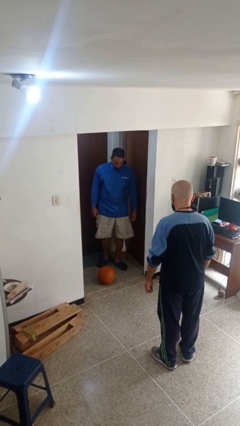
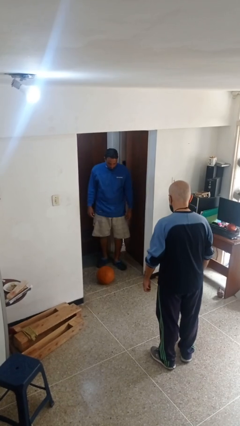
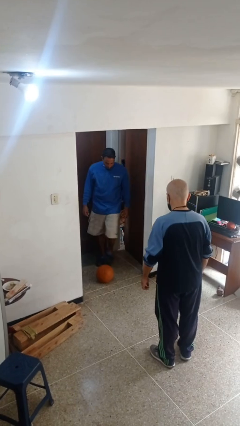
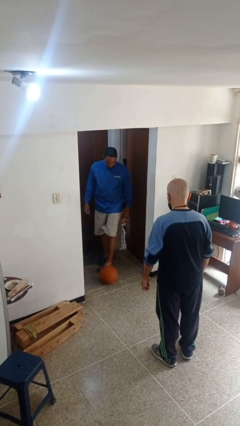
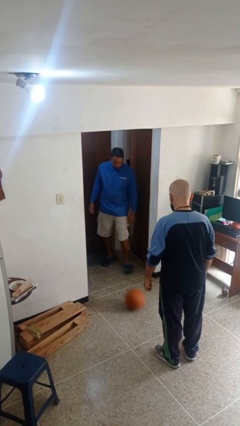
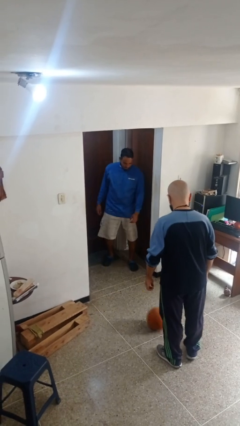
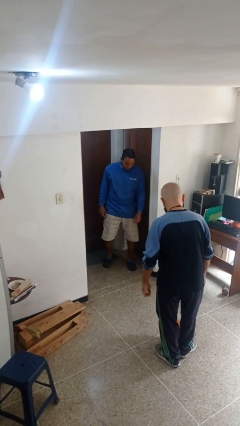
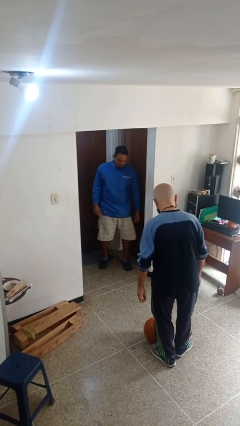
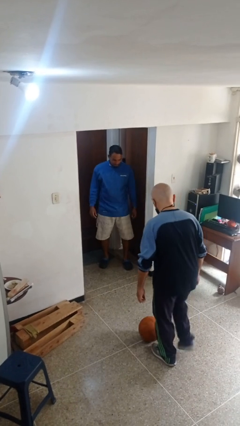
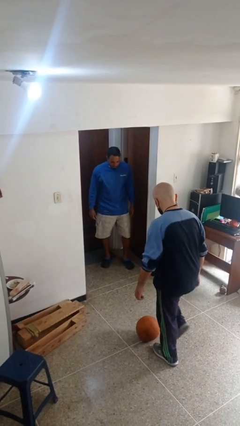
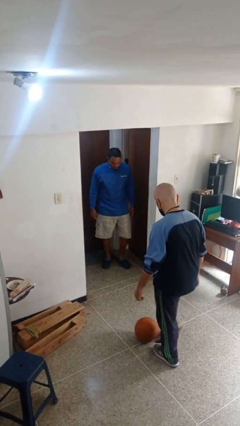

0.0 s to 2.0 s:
person kicks object to person

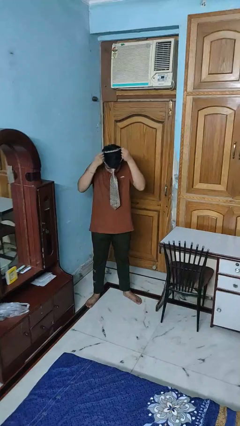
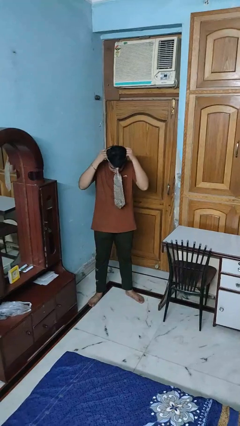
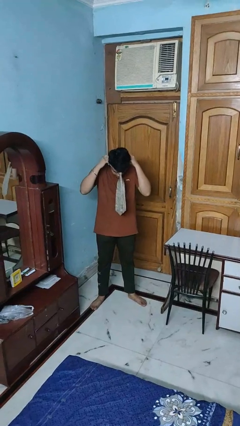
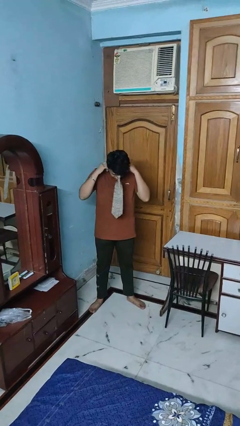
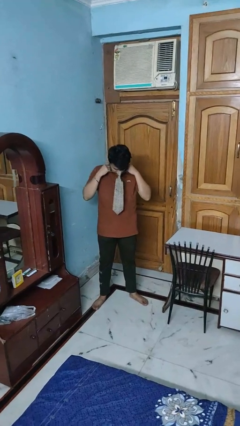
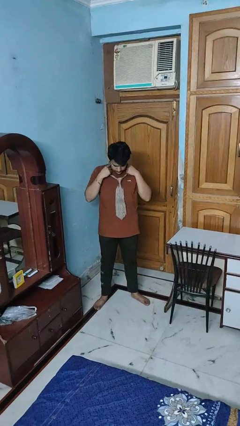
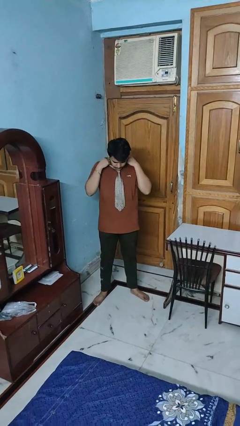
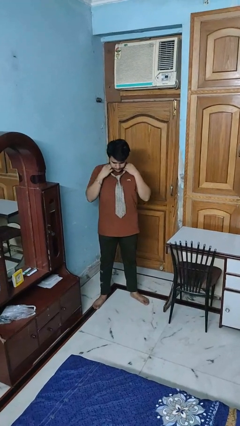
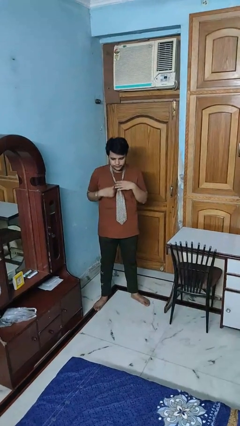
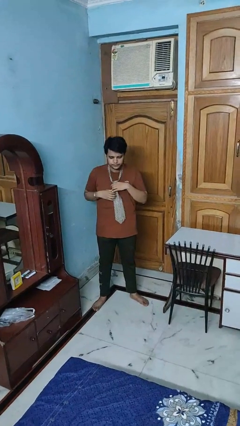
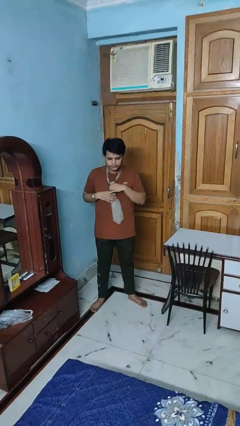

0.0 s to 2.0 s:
person puts on necktie

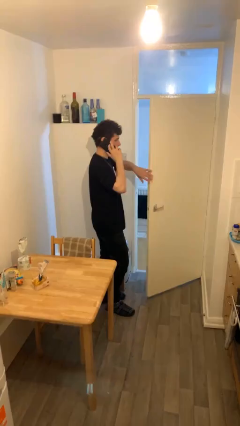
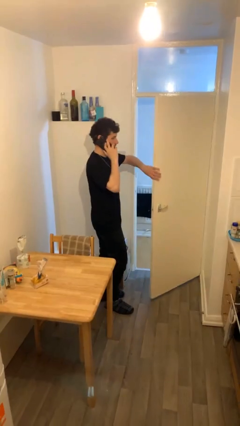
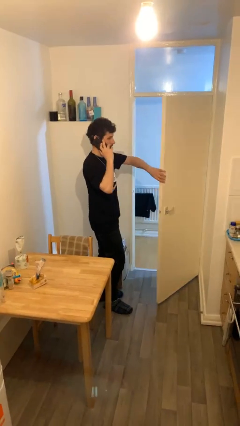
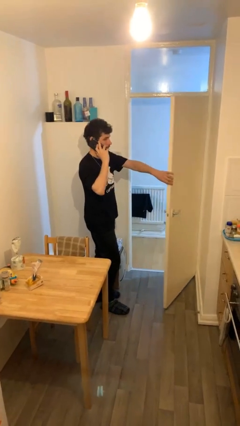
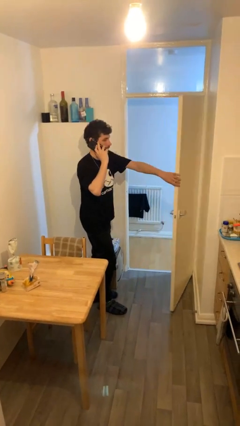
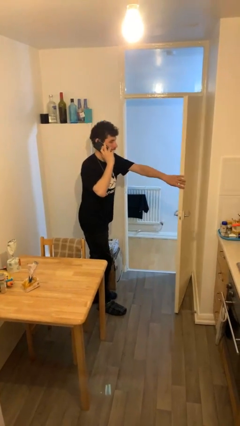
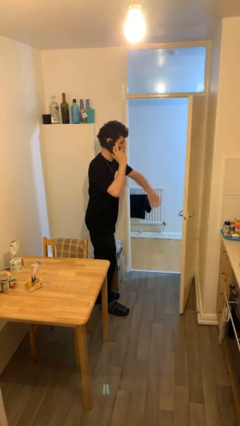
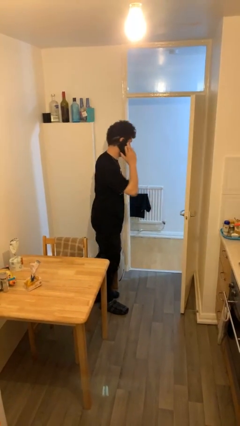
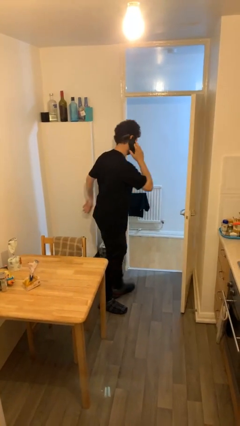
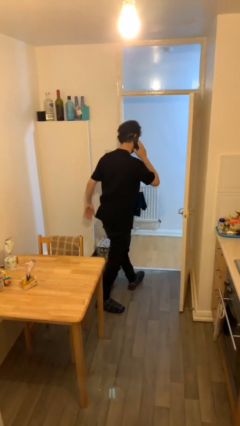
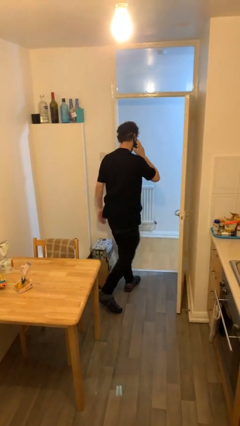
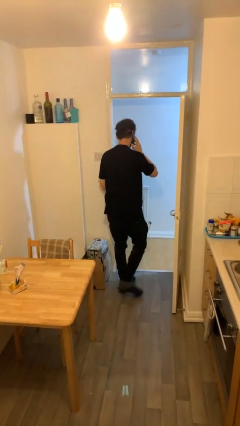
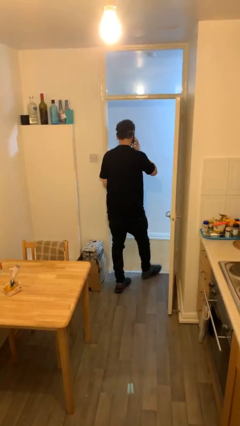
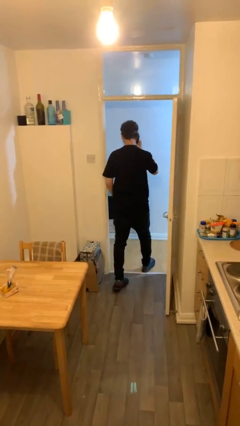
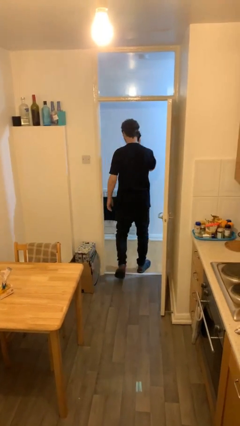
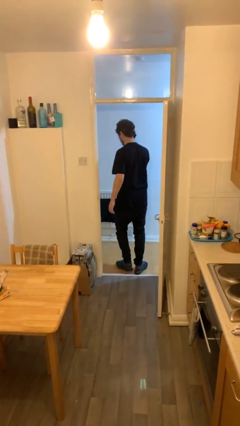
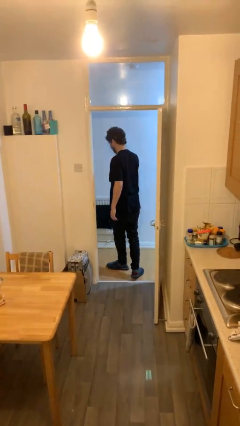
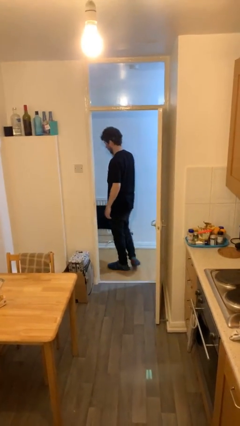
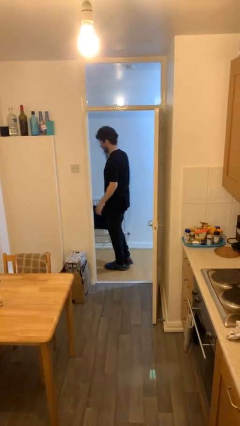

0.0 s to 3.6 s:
person exits scene through structure

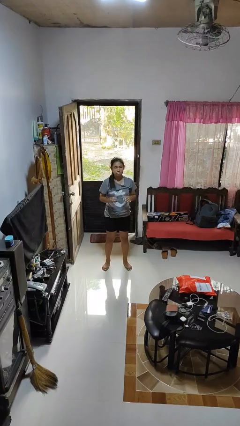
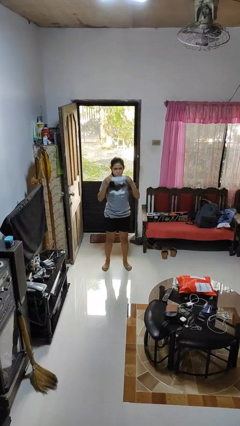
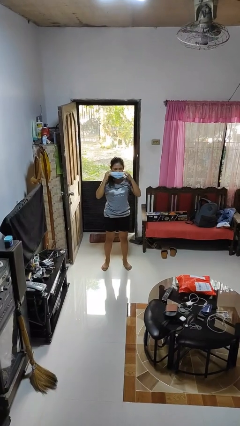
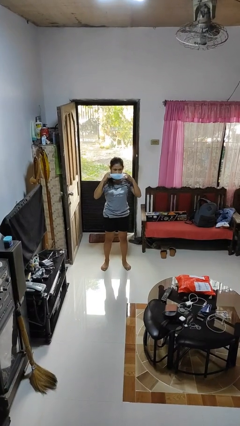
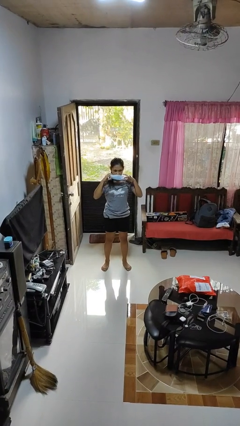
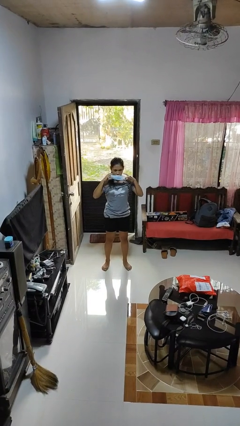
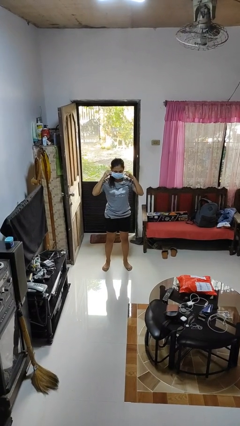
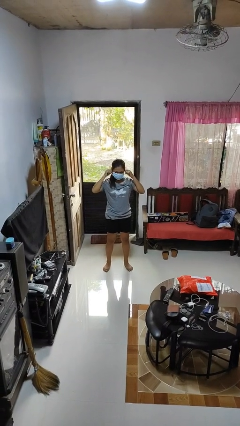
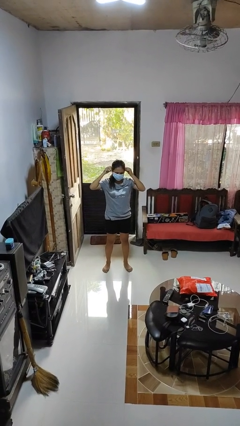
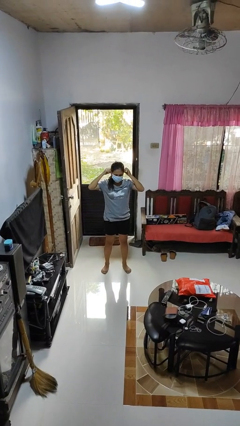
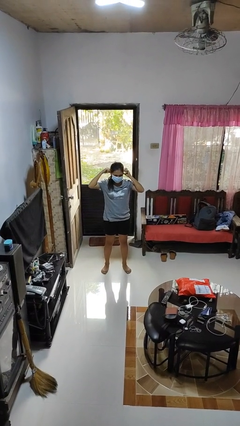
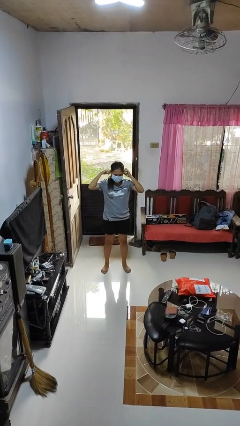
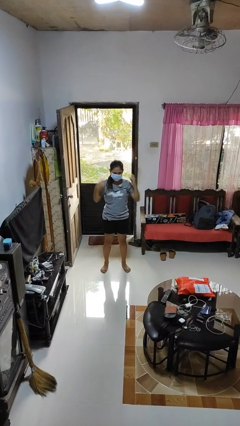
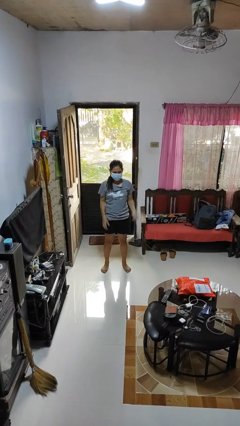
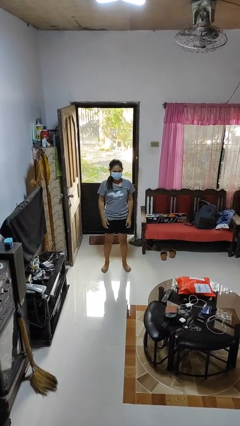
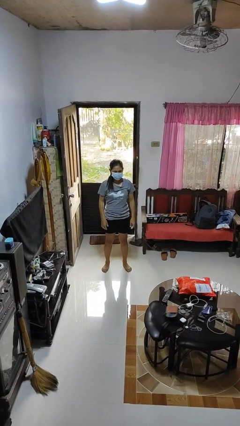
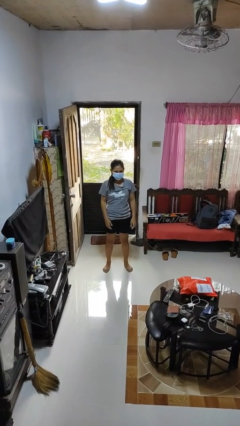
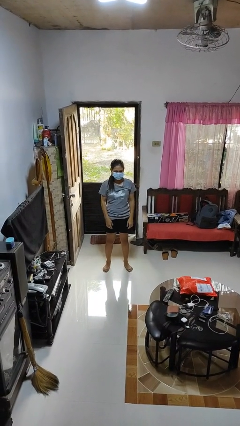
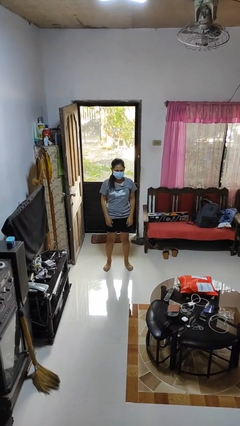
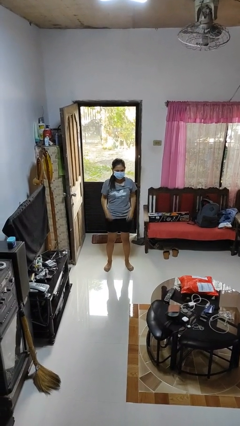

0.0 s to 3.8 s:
person puts on facemask

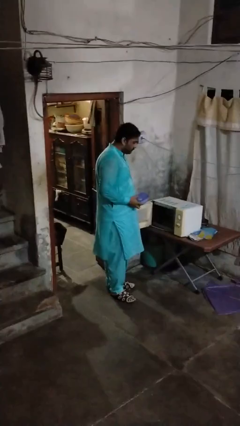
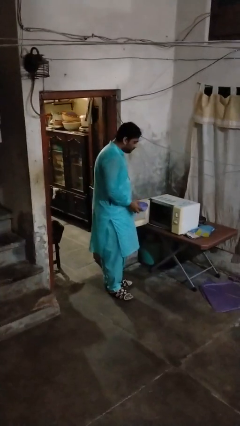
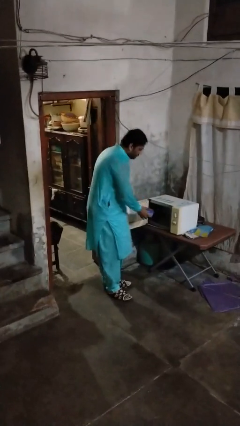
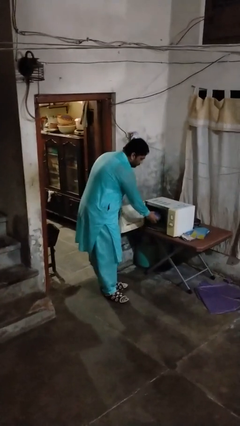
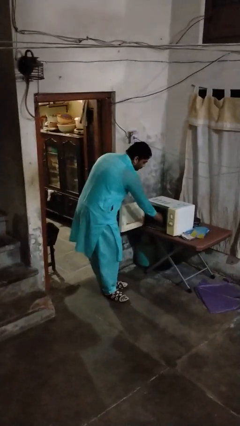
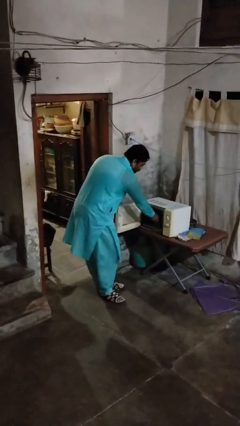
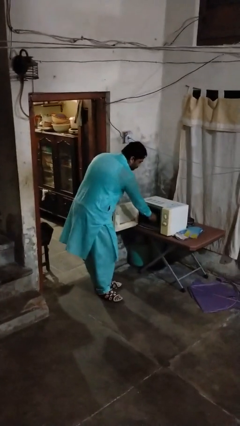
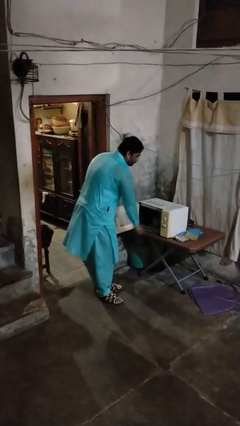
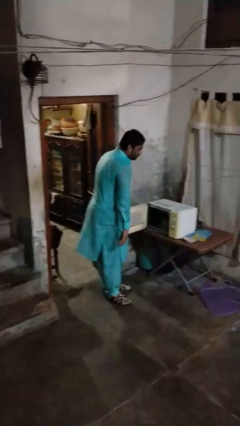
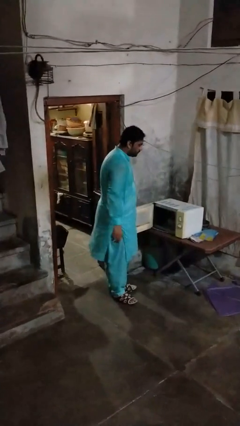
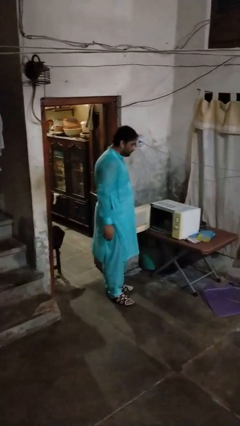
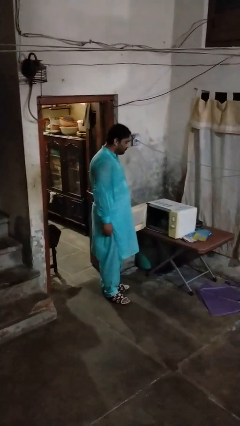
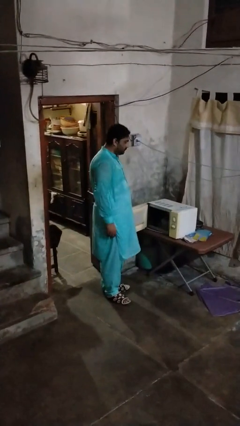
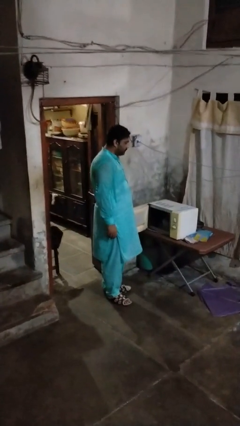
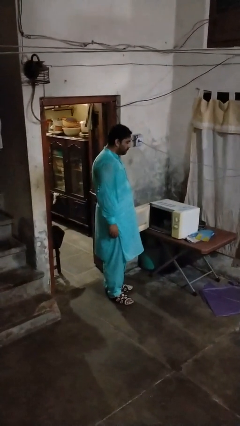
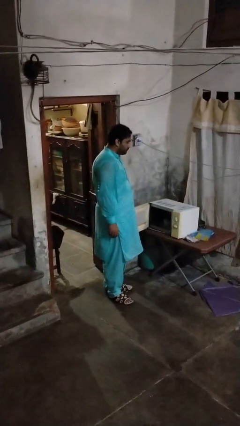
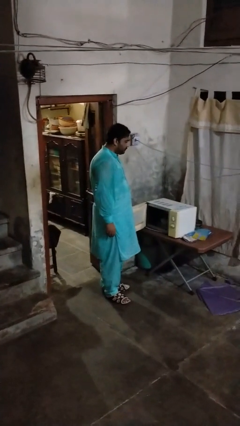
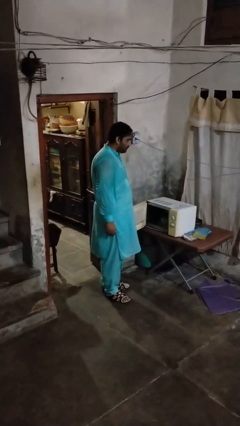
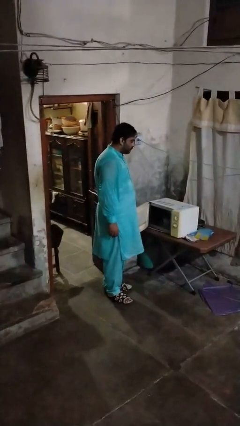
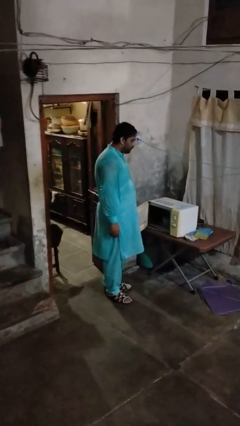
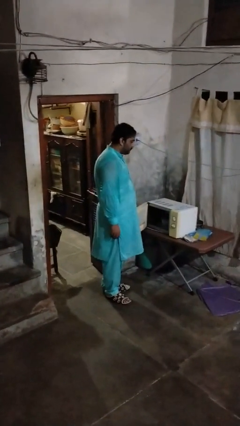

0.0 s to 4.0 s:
person puts object into microwave

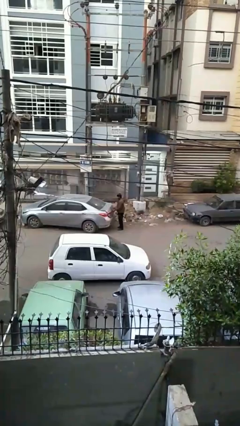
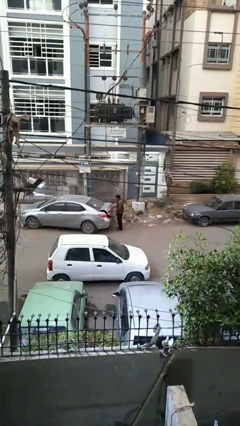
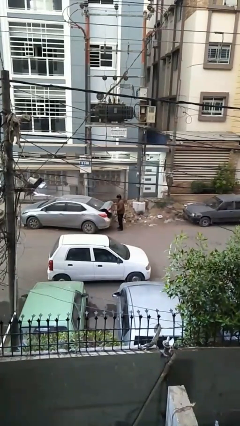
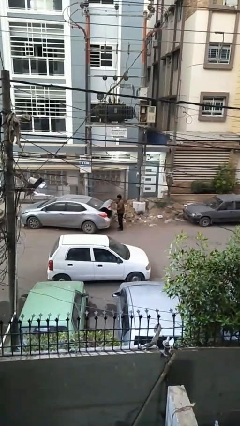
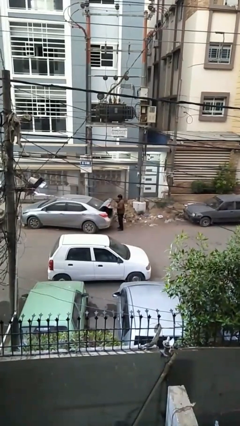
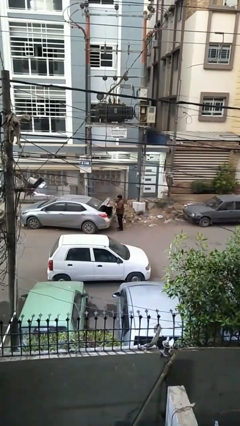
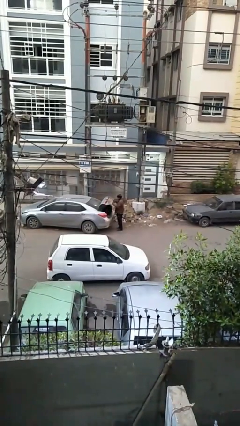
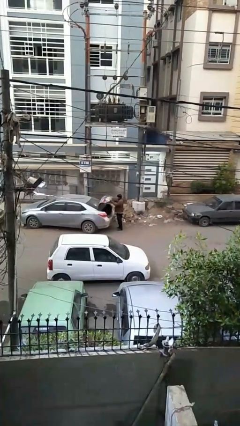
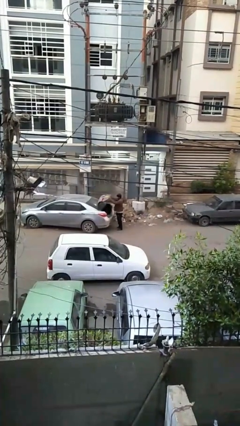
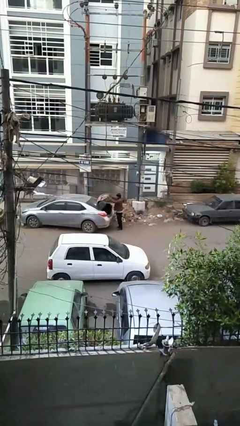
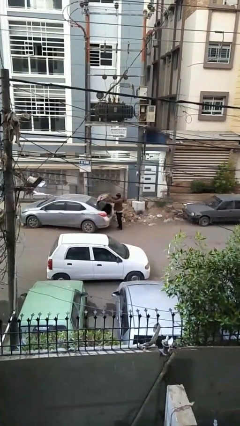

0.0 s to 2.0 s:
person opens car trunk
